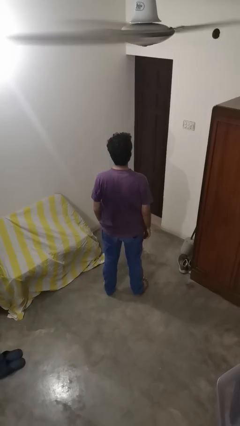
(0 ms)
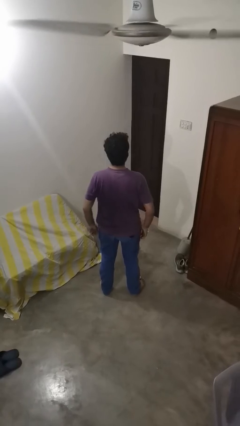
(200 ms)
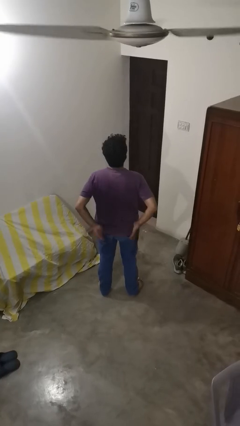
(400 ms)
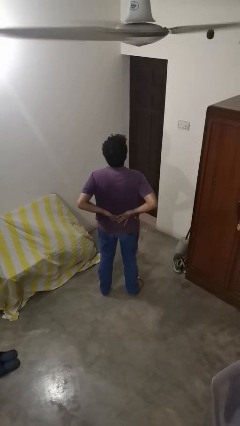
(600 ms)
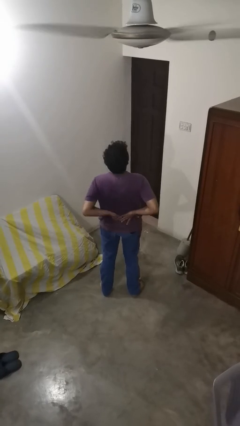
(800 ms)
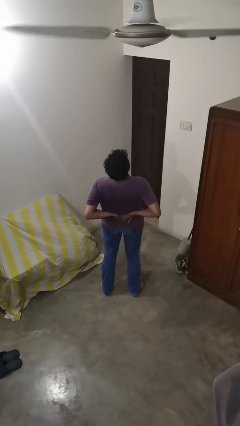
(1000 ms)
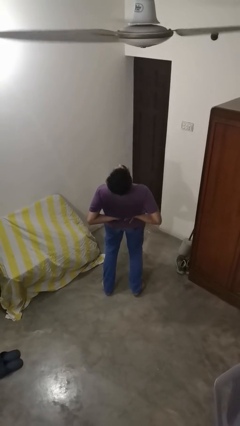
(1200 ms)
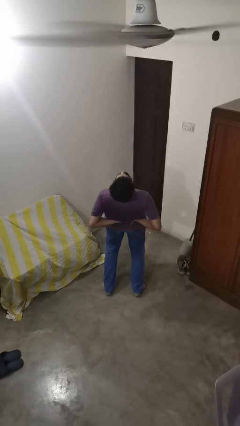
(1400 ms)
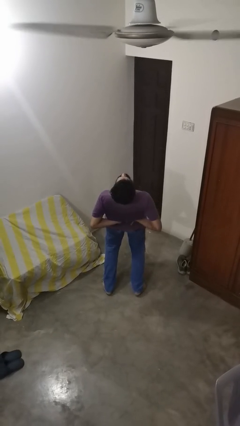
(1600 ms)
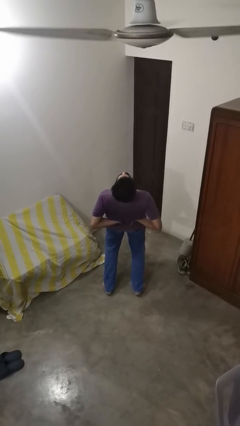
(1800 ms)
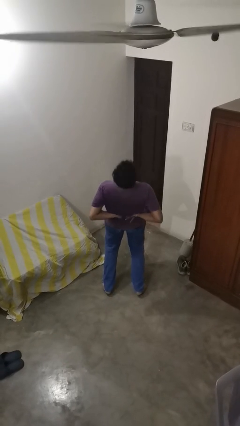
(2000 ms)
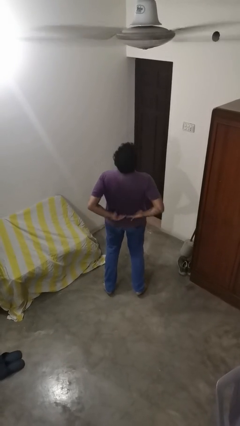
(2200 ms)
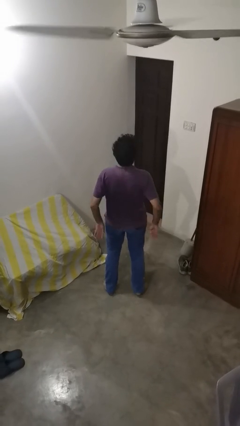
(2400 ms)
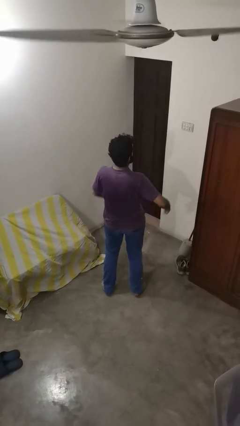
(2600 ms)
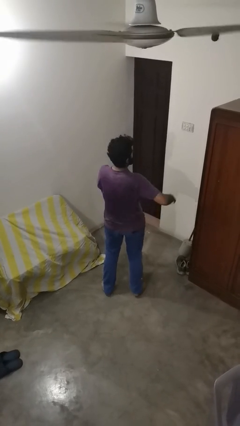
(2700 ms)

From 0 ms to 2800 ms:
person stretches back

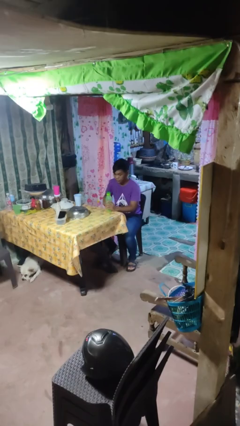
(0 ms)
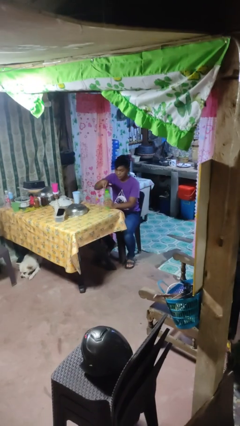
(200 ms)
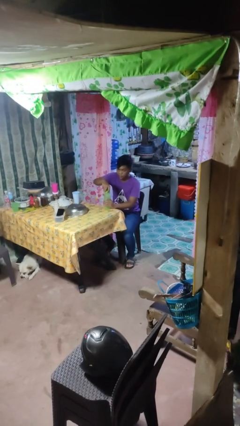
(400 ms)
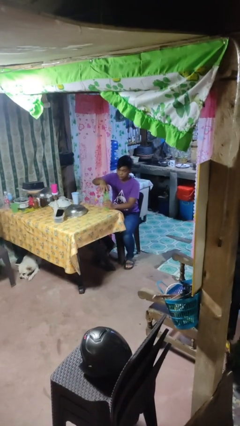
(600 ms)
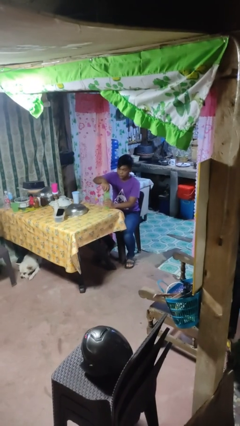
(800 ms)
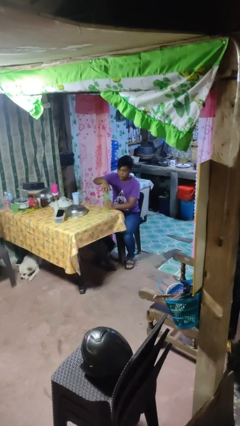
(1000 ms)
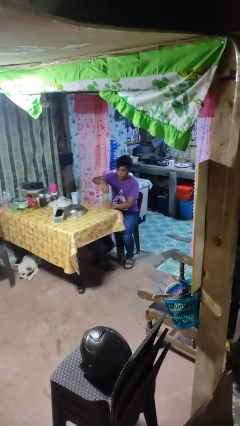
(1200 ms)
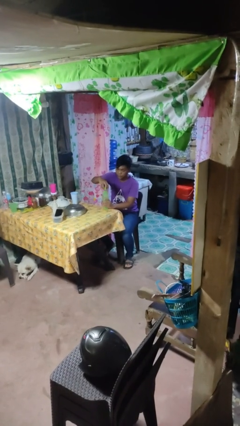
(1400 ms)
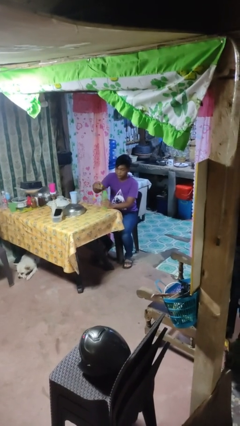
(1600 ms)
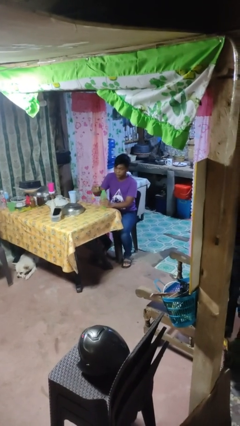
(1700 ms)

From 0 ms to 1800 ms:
person unscrews lid from bottle

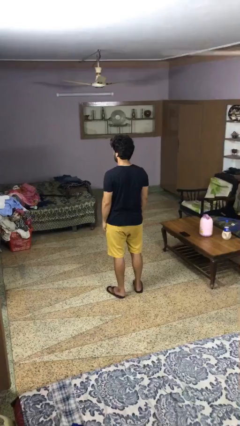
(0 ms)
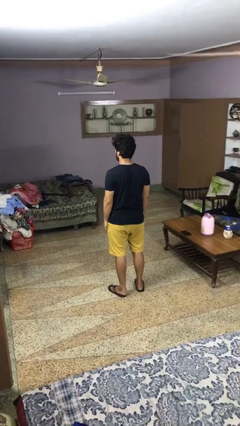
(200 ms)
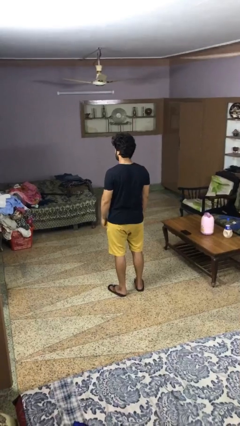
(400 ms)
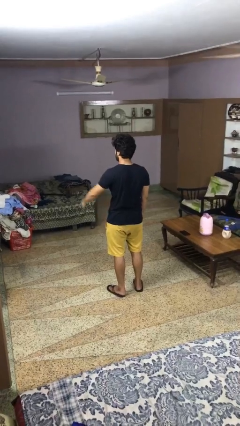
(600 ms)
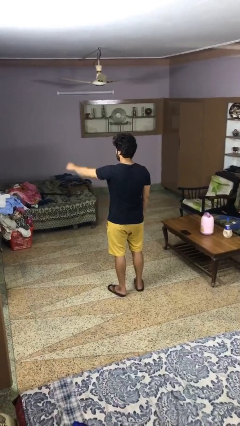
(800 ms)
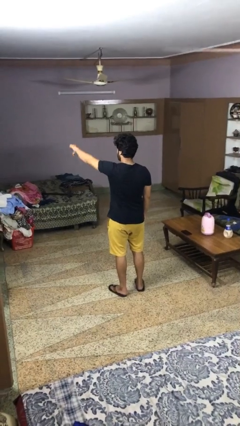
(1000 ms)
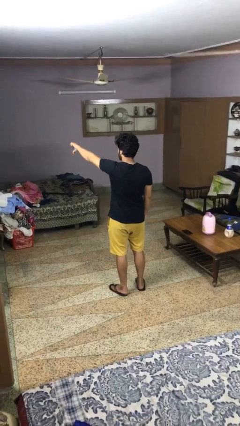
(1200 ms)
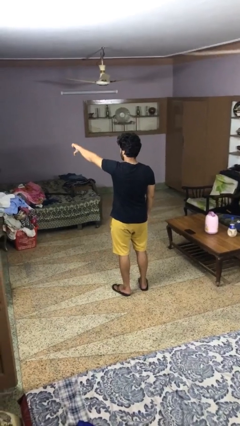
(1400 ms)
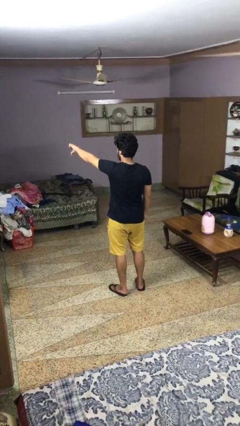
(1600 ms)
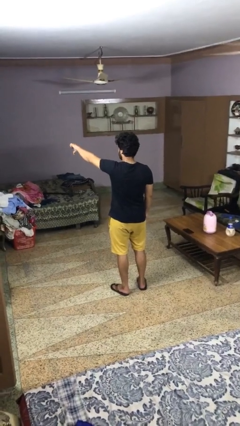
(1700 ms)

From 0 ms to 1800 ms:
person gestures thumbs down

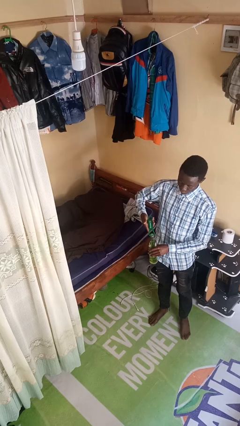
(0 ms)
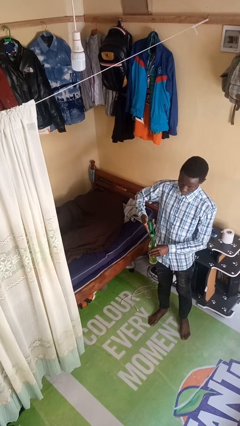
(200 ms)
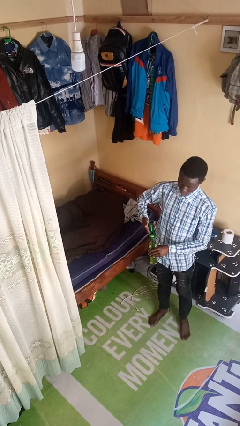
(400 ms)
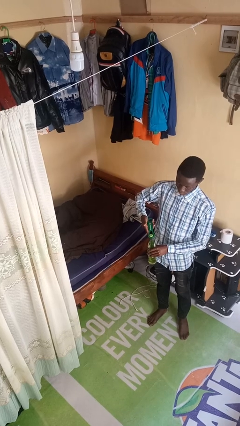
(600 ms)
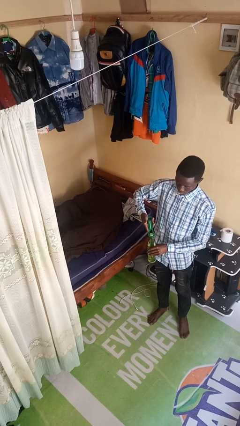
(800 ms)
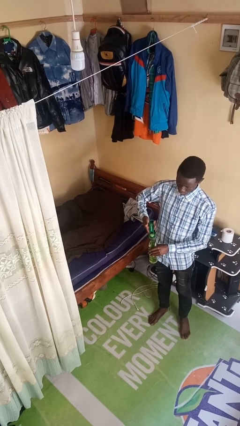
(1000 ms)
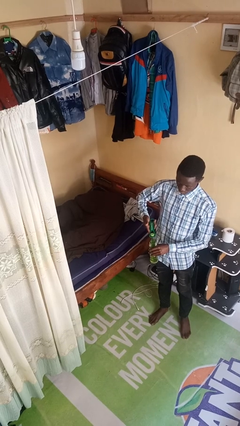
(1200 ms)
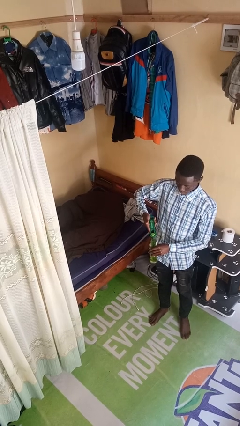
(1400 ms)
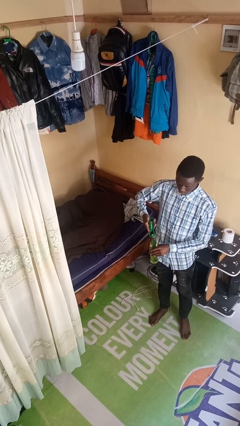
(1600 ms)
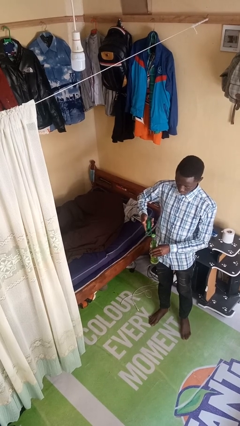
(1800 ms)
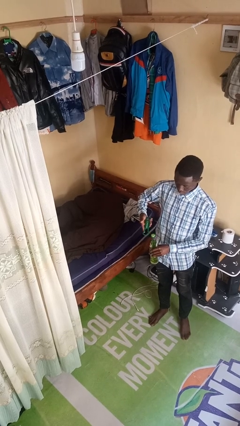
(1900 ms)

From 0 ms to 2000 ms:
person opens can with can opener

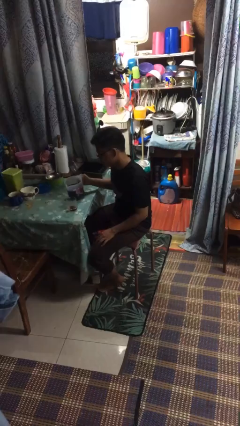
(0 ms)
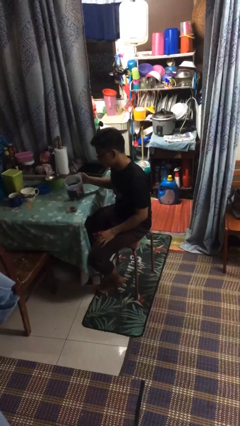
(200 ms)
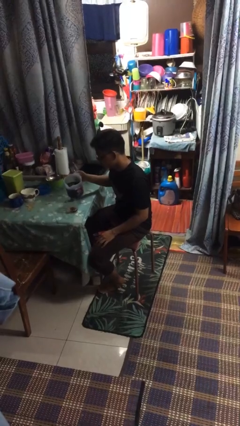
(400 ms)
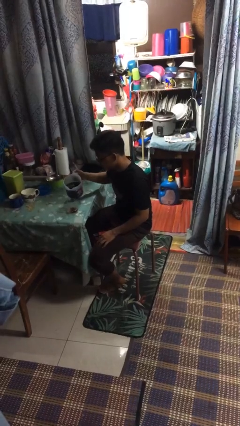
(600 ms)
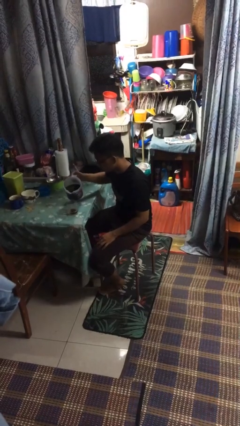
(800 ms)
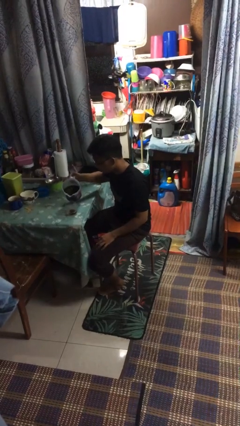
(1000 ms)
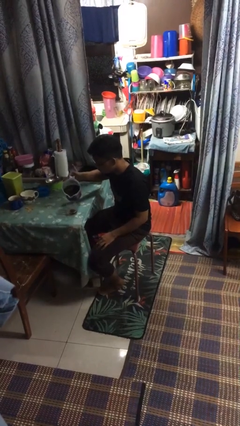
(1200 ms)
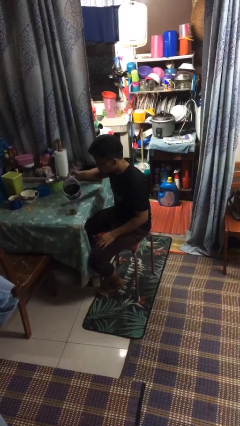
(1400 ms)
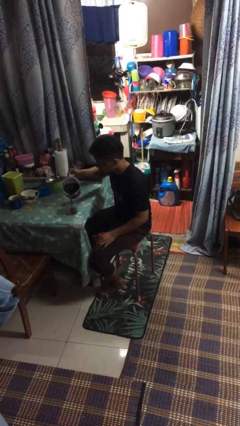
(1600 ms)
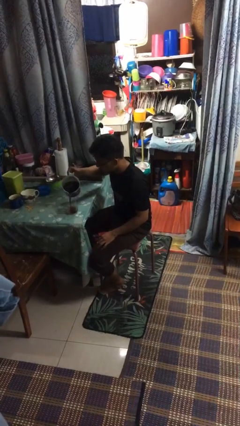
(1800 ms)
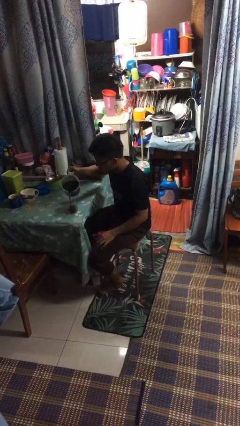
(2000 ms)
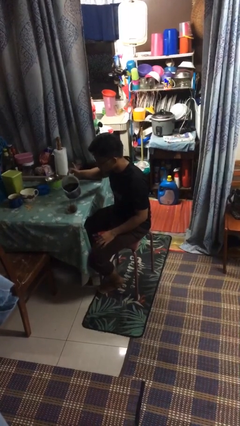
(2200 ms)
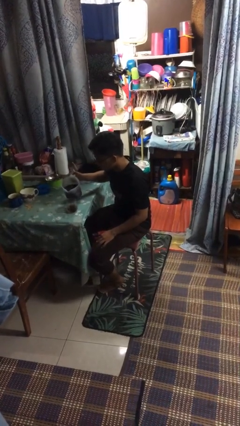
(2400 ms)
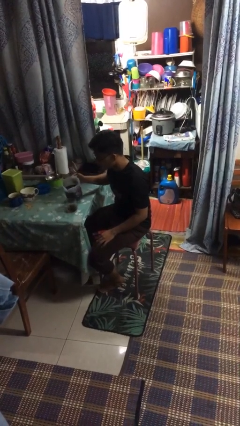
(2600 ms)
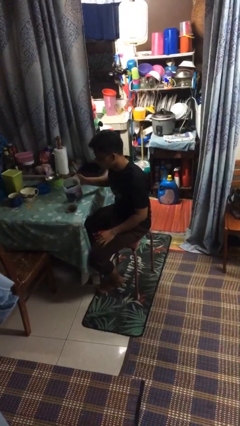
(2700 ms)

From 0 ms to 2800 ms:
person pours coffee into mug

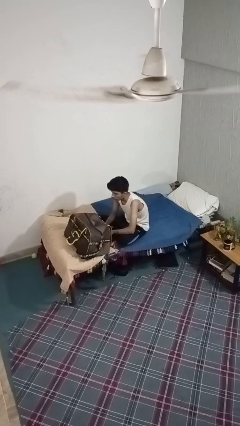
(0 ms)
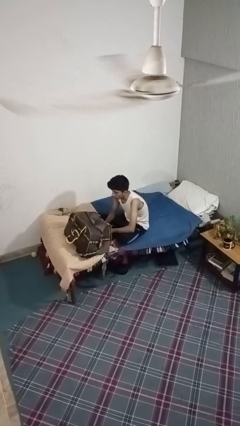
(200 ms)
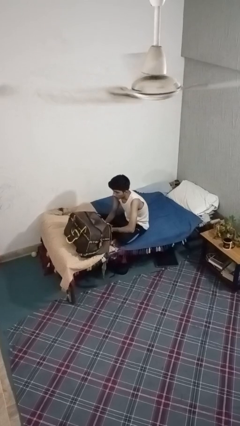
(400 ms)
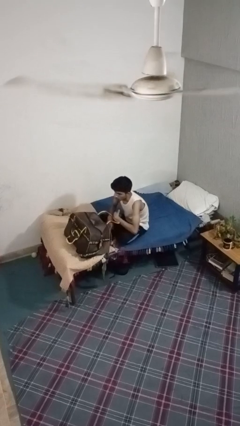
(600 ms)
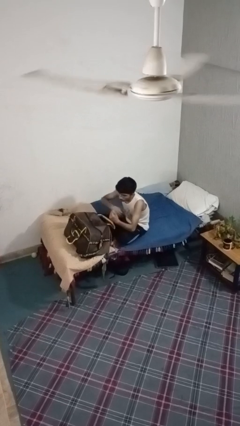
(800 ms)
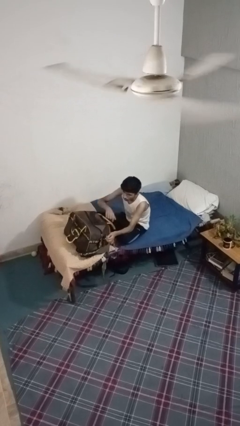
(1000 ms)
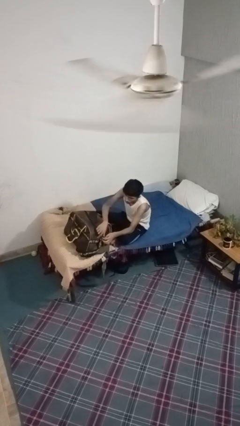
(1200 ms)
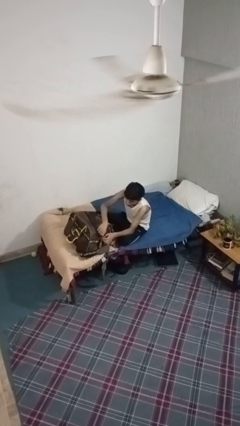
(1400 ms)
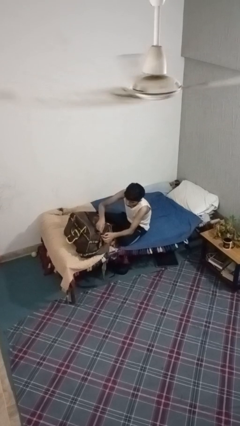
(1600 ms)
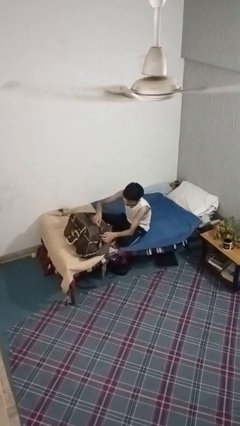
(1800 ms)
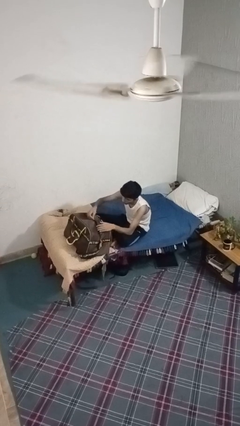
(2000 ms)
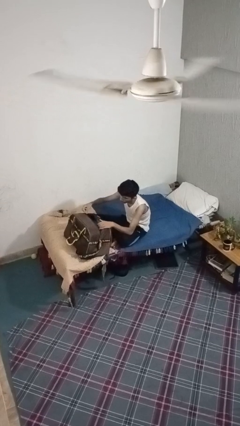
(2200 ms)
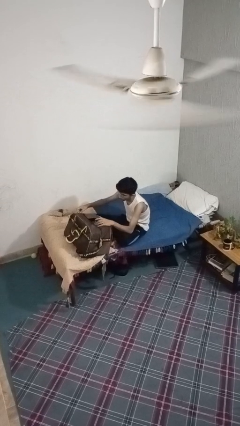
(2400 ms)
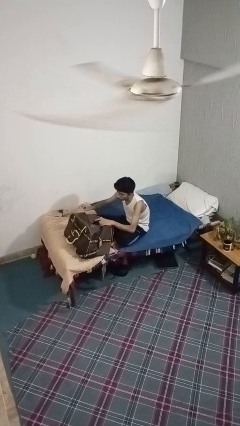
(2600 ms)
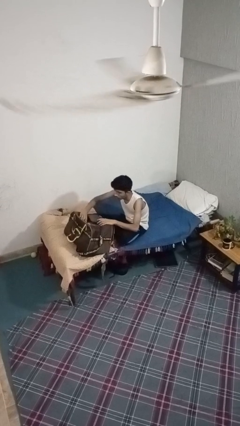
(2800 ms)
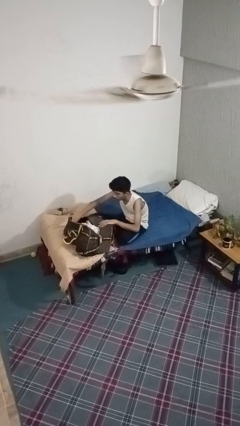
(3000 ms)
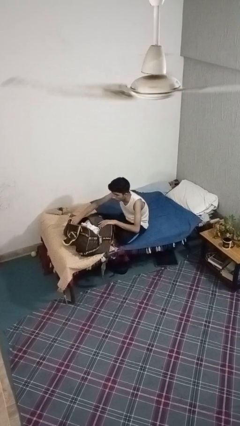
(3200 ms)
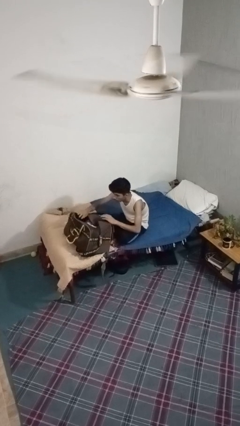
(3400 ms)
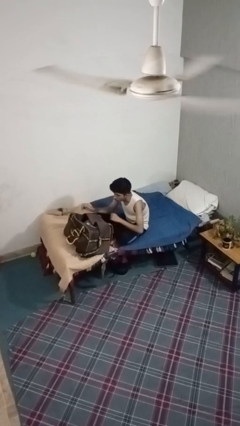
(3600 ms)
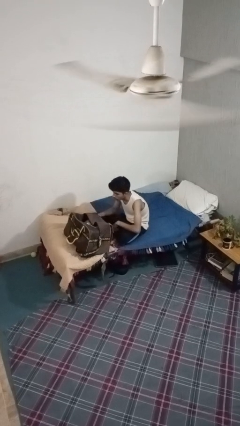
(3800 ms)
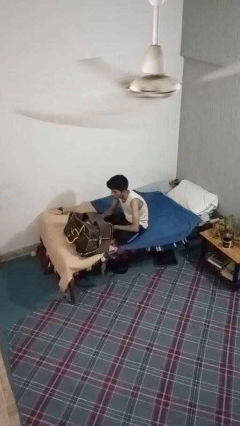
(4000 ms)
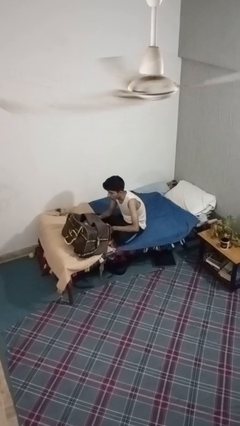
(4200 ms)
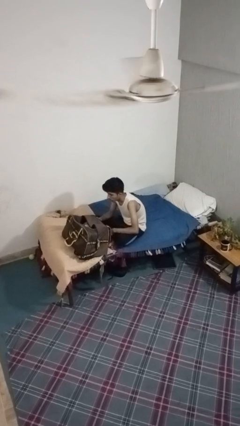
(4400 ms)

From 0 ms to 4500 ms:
person opens suitcase

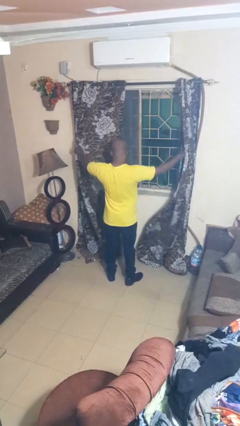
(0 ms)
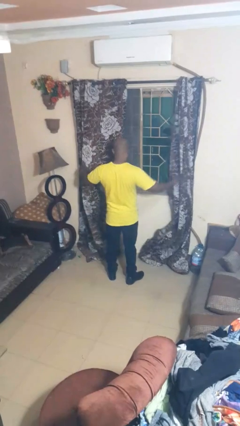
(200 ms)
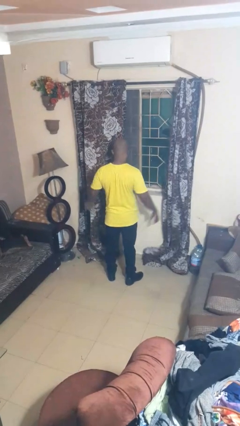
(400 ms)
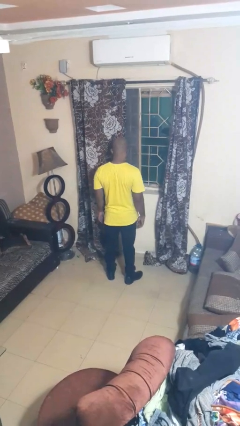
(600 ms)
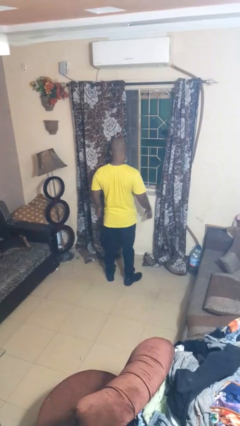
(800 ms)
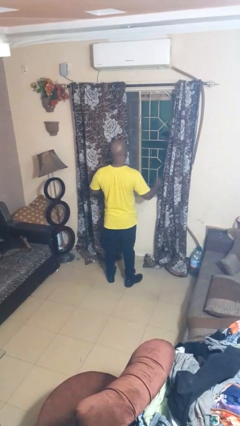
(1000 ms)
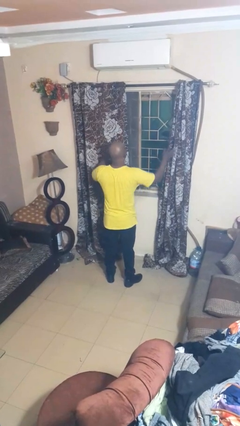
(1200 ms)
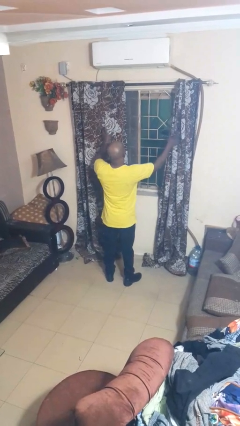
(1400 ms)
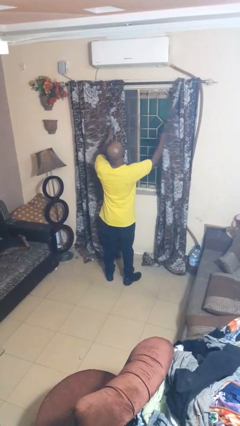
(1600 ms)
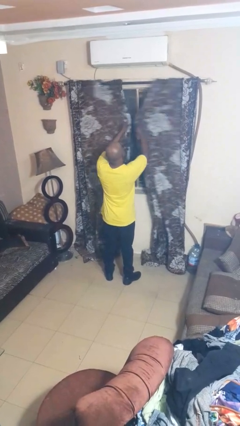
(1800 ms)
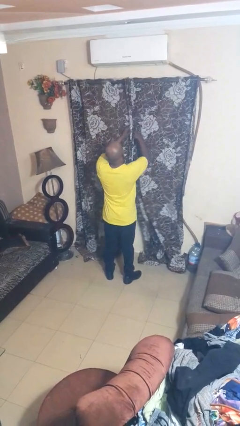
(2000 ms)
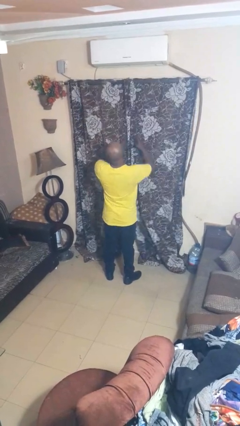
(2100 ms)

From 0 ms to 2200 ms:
person closes curtains
